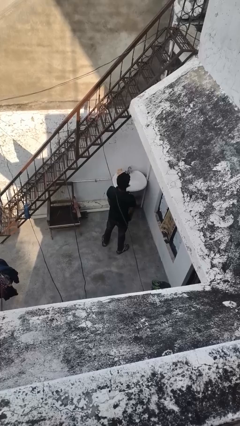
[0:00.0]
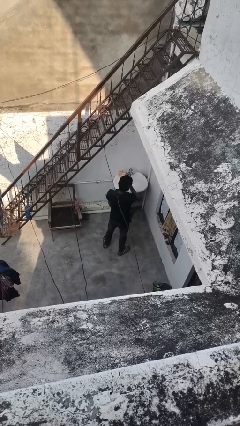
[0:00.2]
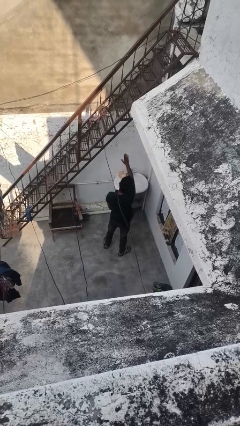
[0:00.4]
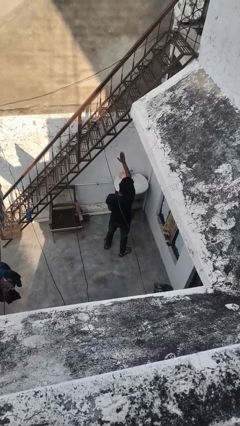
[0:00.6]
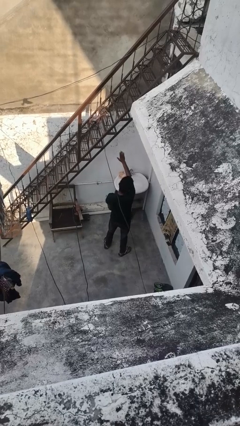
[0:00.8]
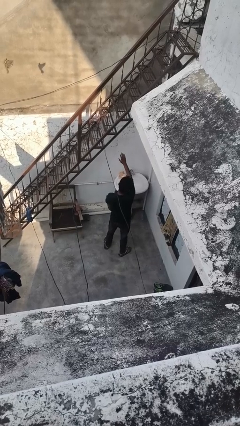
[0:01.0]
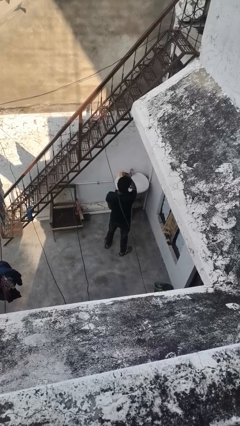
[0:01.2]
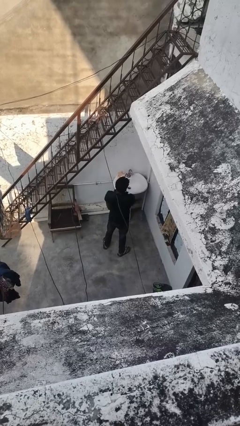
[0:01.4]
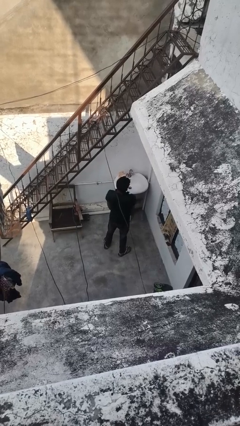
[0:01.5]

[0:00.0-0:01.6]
person gestures stop

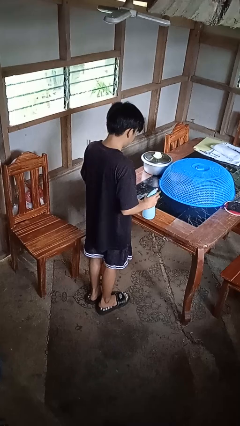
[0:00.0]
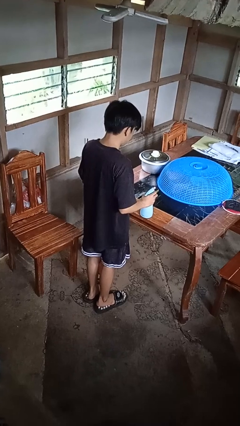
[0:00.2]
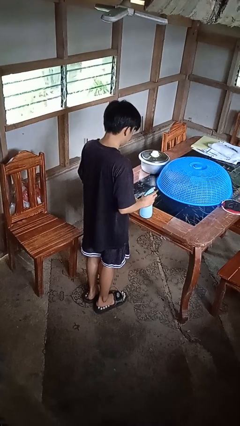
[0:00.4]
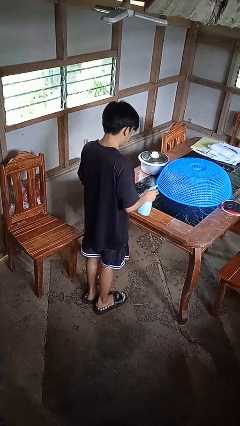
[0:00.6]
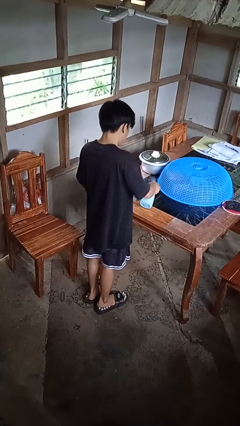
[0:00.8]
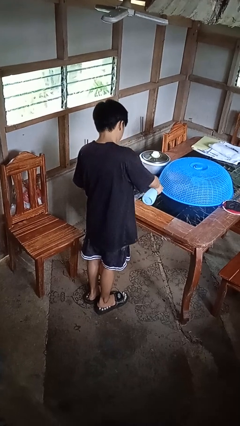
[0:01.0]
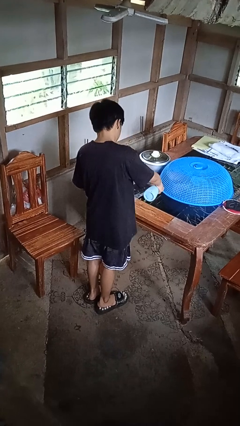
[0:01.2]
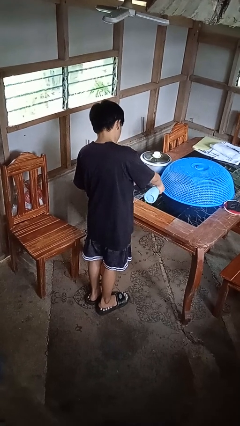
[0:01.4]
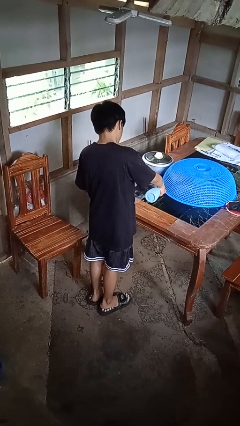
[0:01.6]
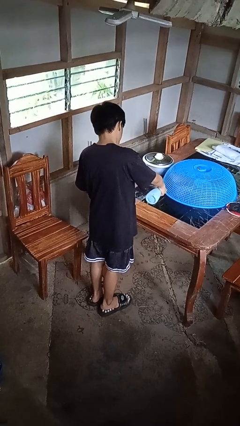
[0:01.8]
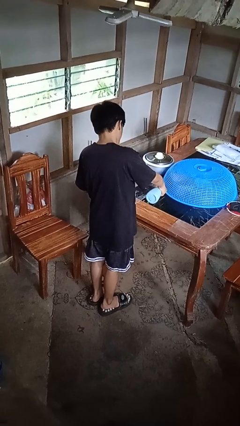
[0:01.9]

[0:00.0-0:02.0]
person sprays from bottle

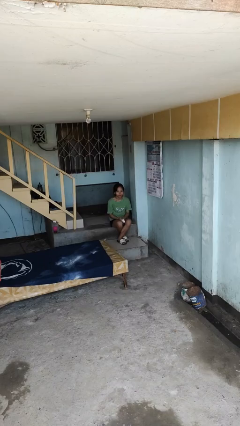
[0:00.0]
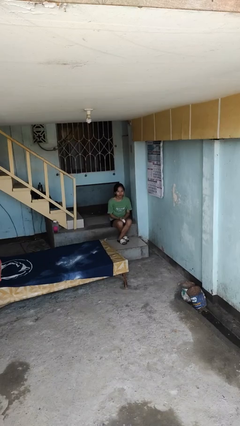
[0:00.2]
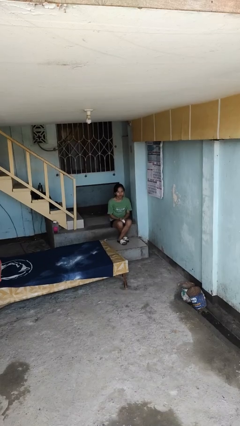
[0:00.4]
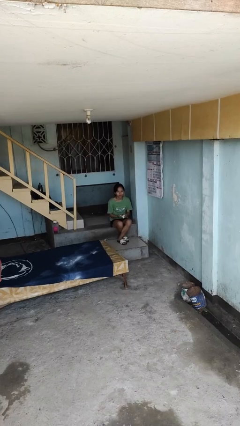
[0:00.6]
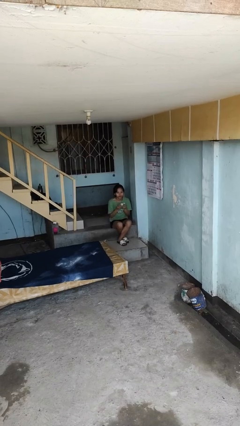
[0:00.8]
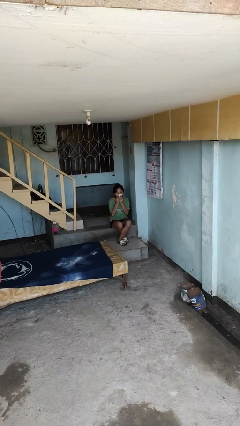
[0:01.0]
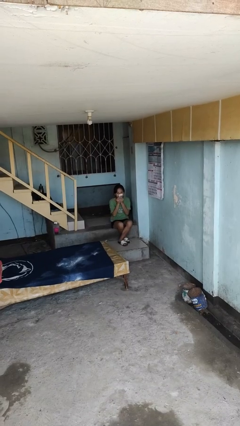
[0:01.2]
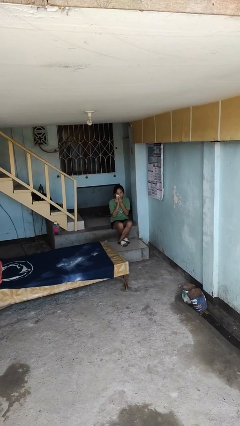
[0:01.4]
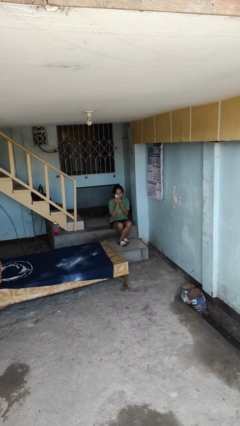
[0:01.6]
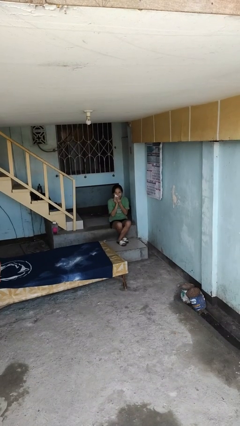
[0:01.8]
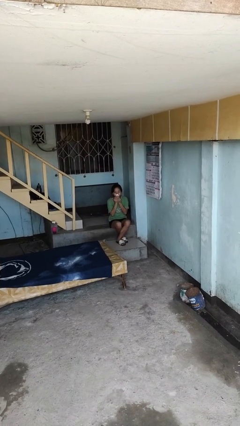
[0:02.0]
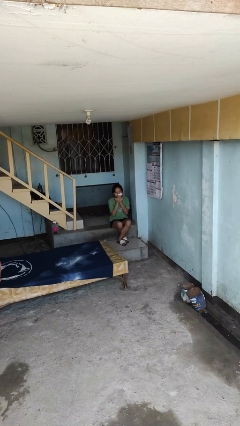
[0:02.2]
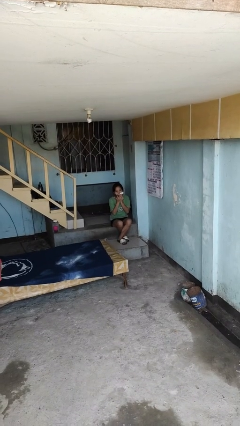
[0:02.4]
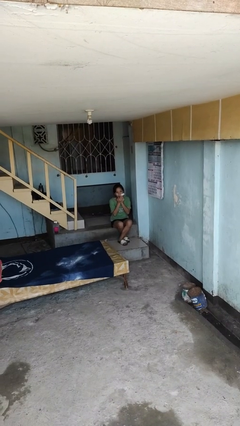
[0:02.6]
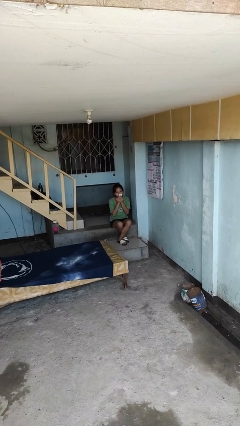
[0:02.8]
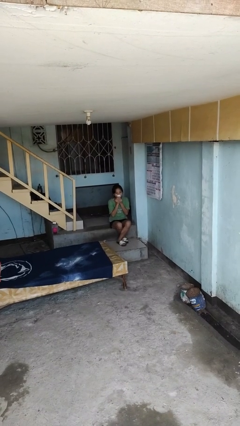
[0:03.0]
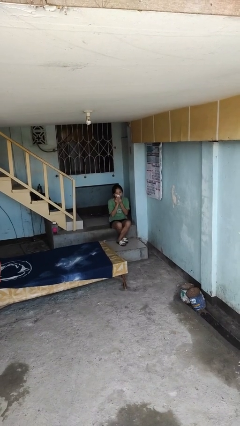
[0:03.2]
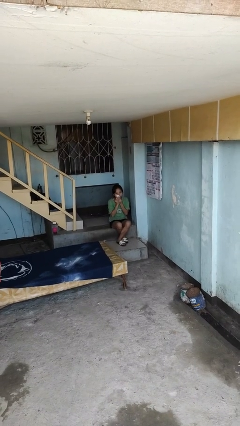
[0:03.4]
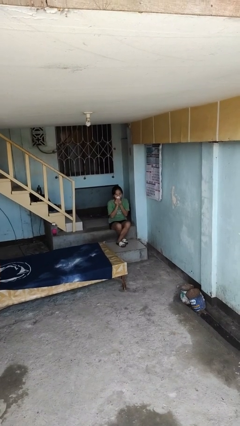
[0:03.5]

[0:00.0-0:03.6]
person wipes mouth with napkin

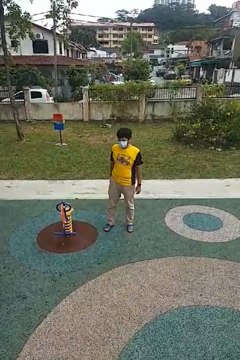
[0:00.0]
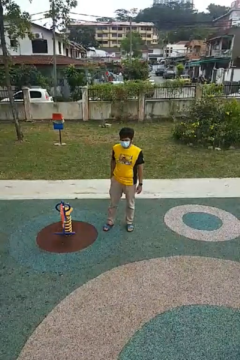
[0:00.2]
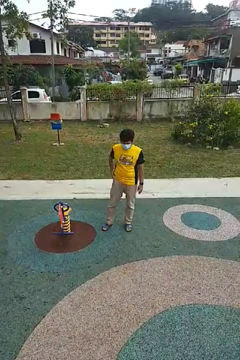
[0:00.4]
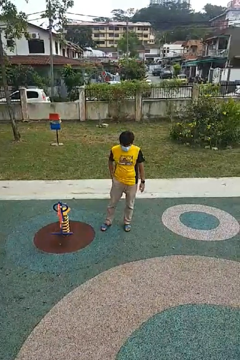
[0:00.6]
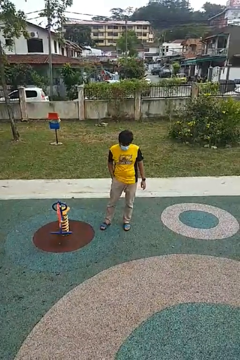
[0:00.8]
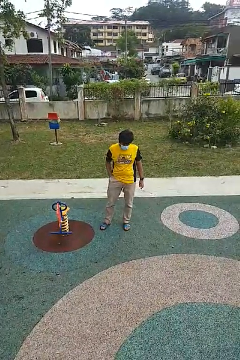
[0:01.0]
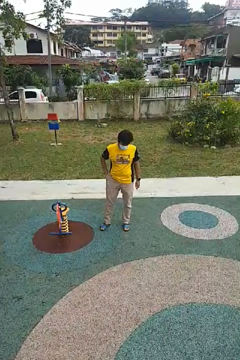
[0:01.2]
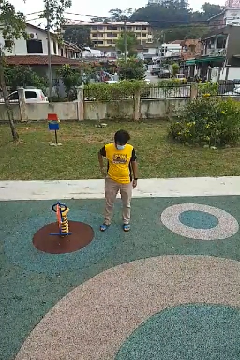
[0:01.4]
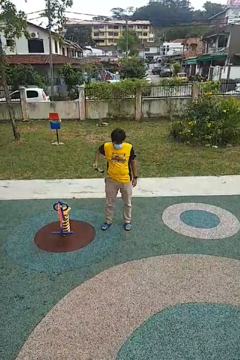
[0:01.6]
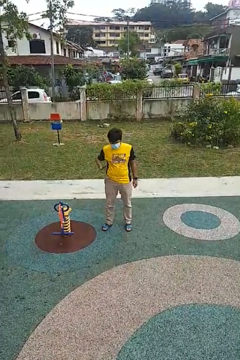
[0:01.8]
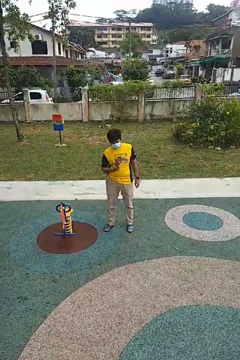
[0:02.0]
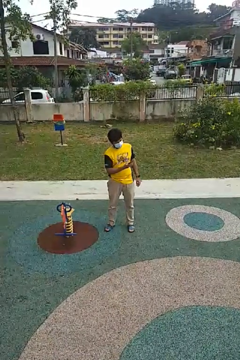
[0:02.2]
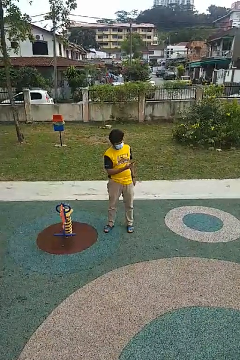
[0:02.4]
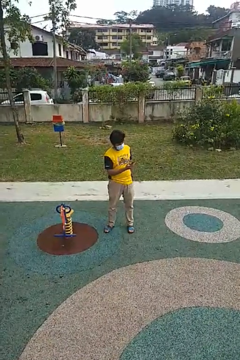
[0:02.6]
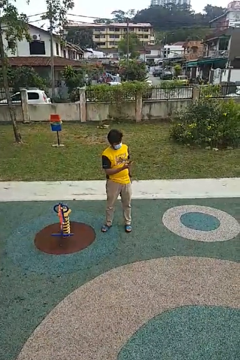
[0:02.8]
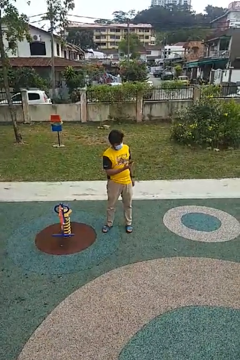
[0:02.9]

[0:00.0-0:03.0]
person takes phone from pocket

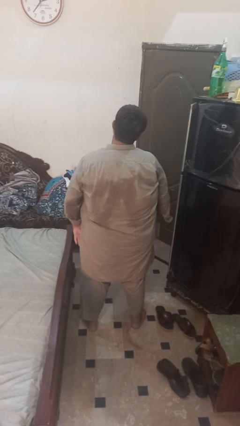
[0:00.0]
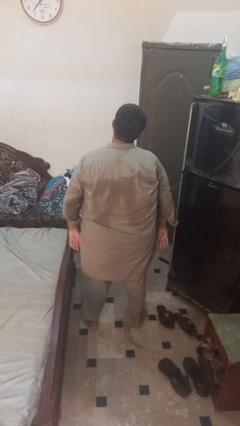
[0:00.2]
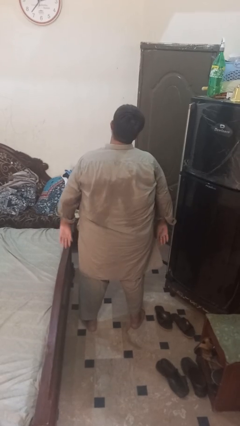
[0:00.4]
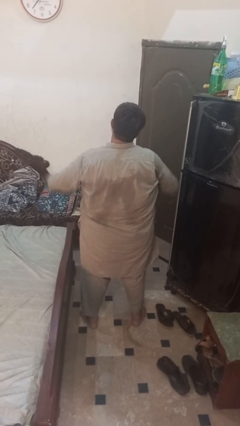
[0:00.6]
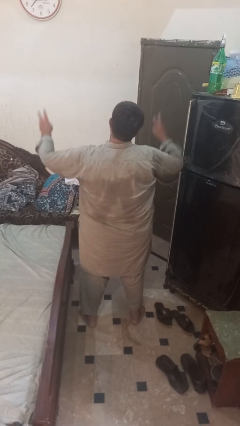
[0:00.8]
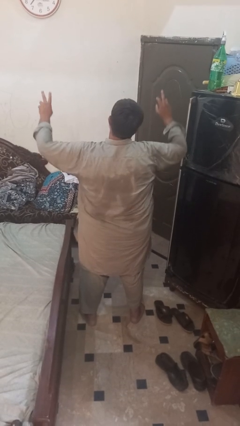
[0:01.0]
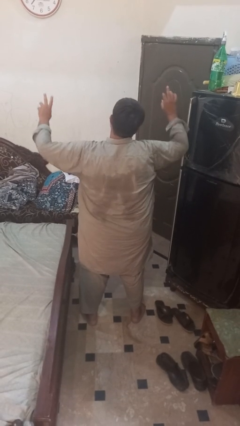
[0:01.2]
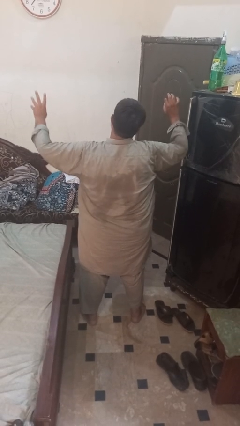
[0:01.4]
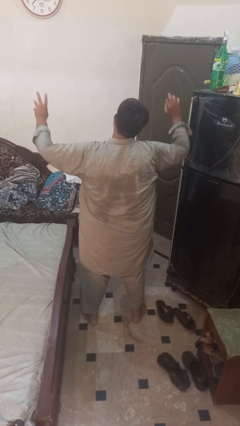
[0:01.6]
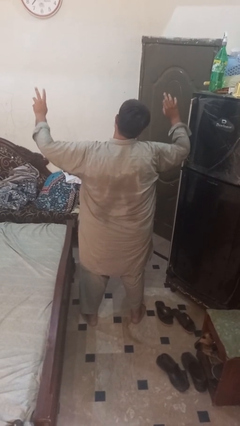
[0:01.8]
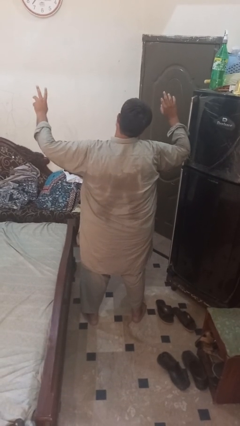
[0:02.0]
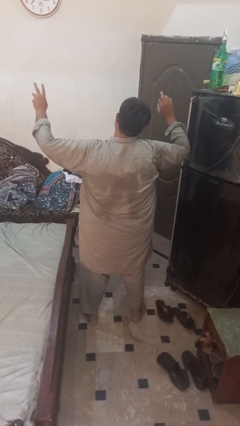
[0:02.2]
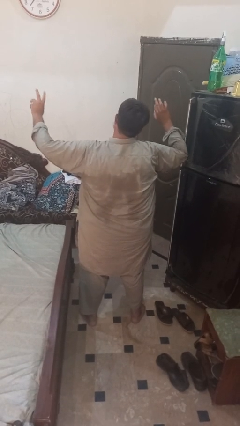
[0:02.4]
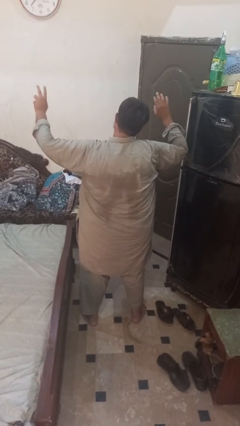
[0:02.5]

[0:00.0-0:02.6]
person dances in place

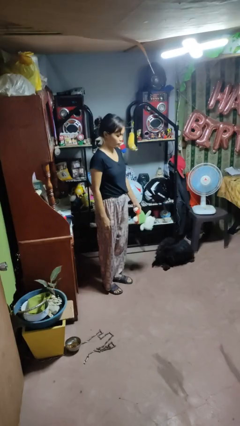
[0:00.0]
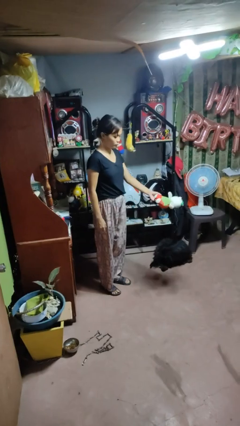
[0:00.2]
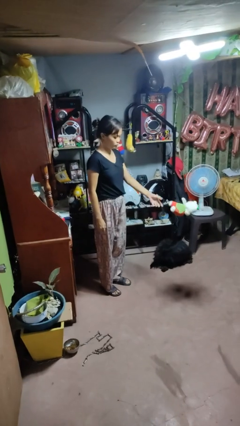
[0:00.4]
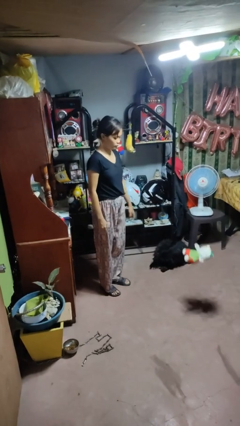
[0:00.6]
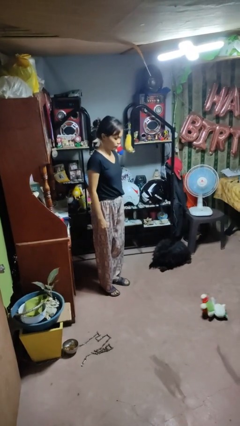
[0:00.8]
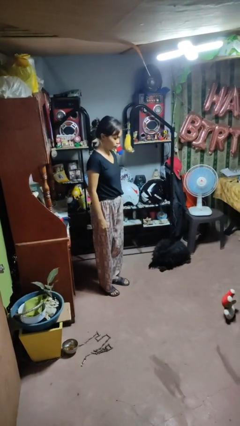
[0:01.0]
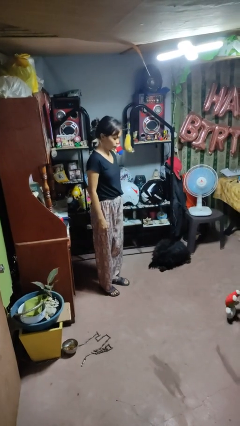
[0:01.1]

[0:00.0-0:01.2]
person throws object to ground

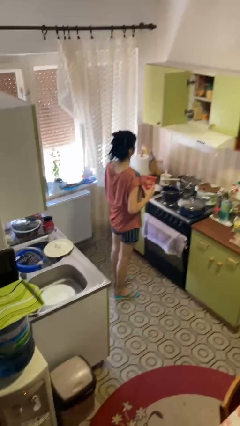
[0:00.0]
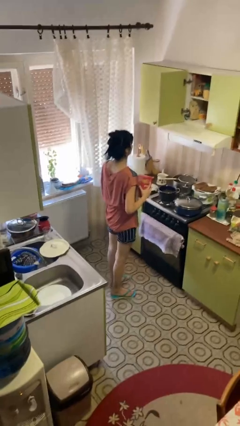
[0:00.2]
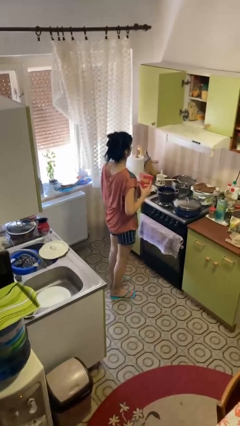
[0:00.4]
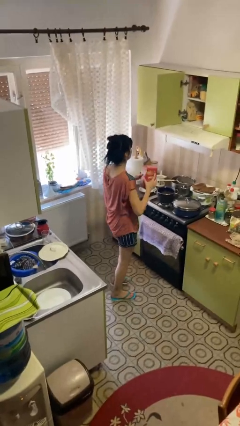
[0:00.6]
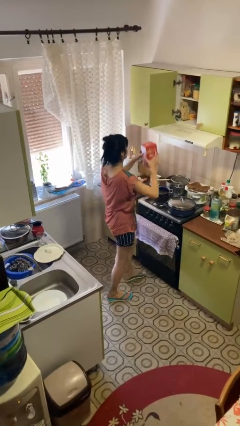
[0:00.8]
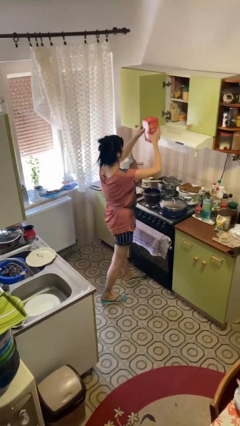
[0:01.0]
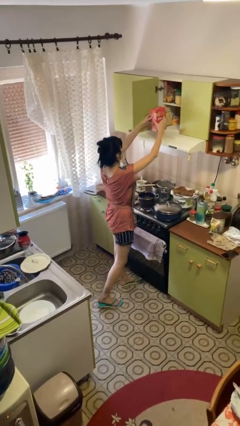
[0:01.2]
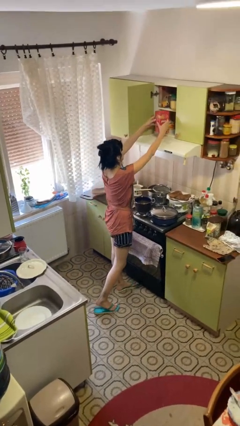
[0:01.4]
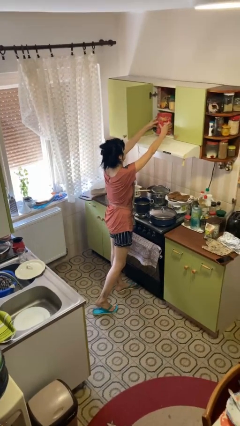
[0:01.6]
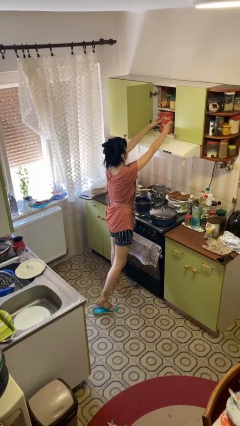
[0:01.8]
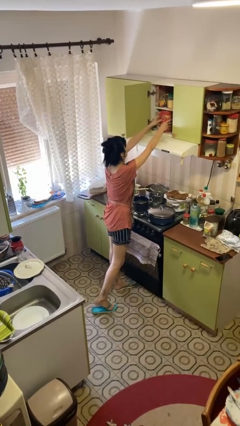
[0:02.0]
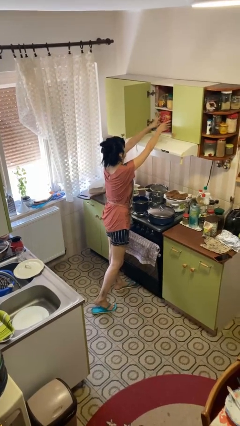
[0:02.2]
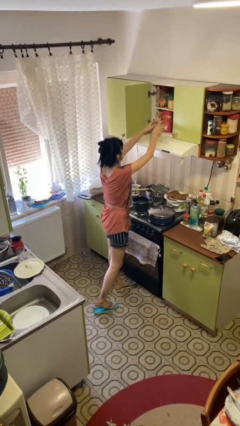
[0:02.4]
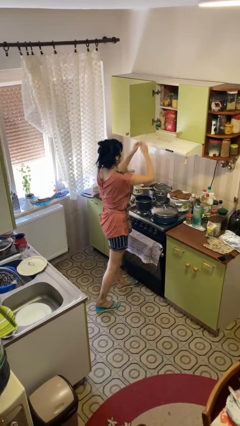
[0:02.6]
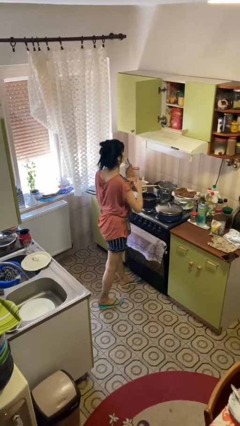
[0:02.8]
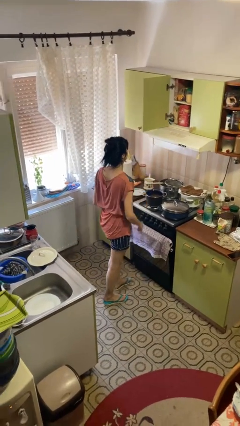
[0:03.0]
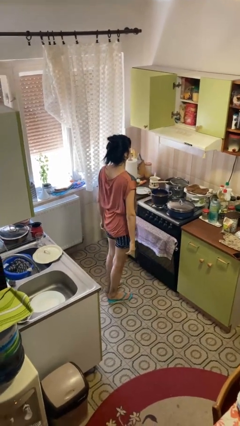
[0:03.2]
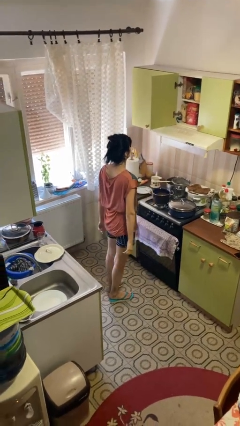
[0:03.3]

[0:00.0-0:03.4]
person puts down object into cabinet
